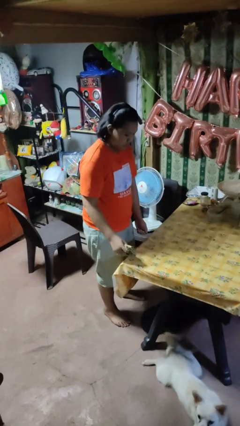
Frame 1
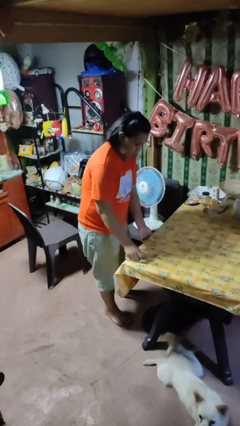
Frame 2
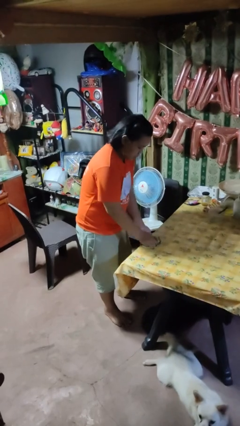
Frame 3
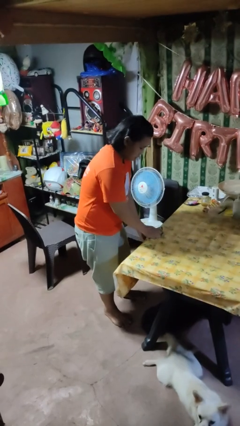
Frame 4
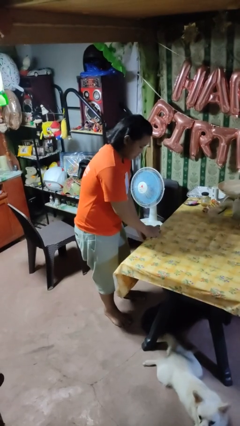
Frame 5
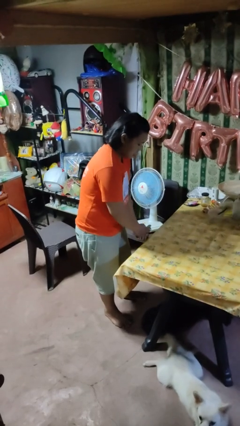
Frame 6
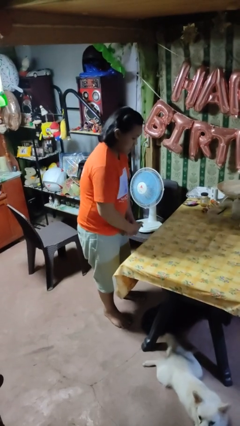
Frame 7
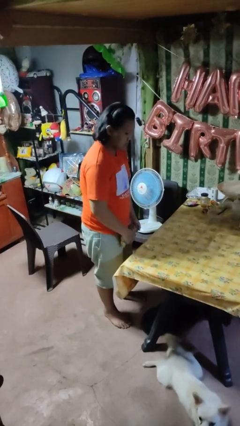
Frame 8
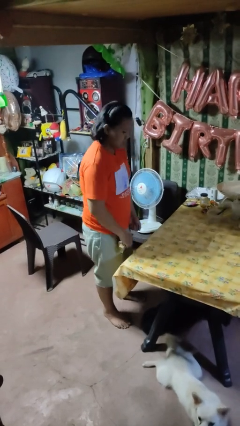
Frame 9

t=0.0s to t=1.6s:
person cleans table with rag

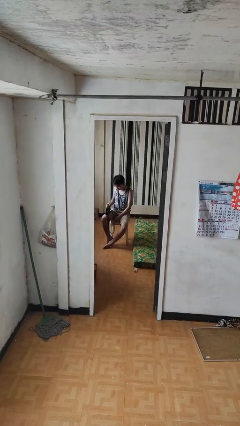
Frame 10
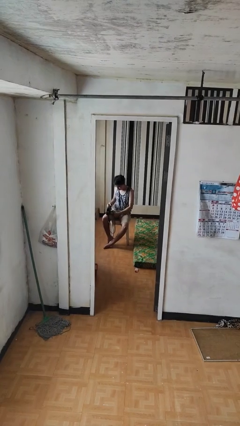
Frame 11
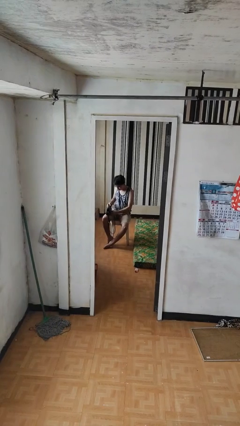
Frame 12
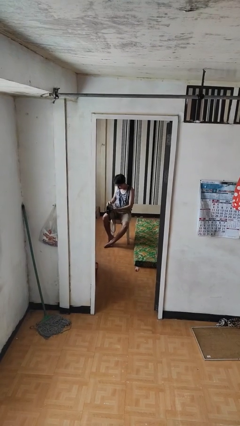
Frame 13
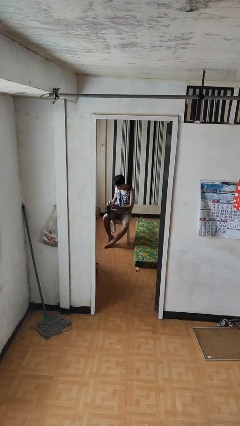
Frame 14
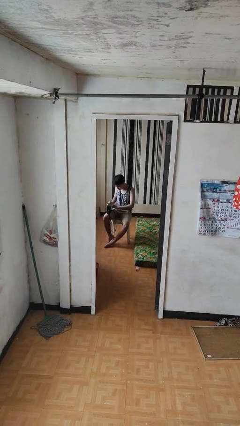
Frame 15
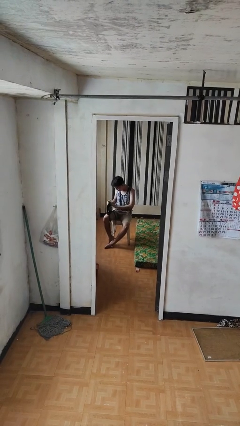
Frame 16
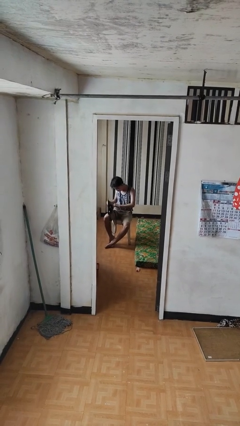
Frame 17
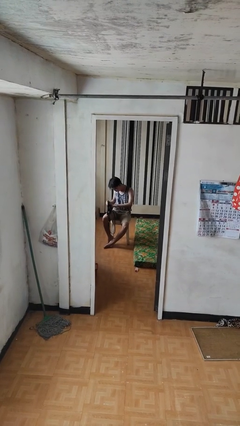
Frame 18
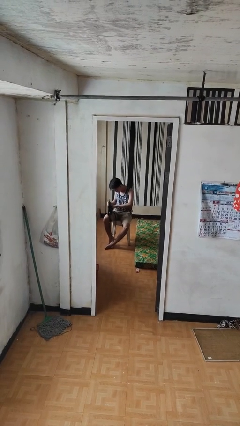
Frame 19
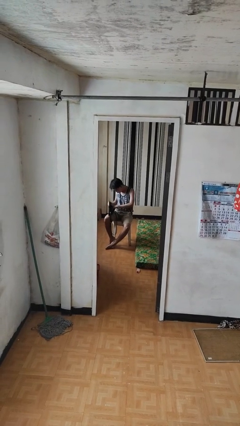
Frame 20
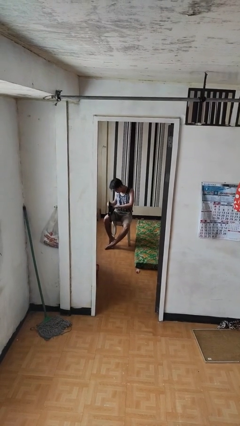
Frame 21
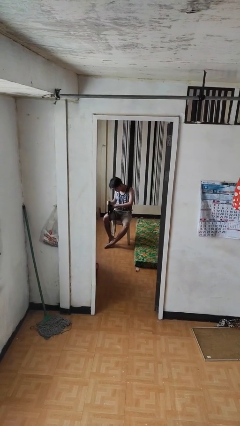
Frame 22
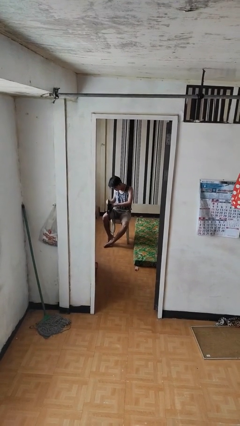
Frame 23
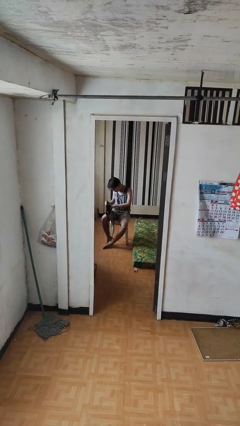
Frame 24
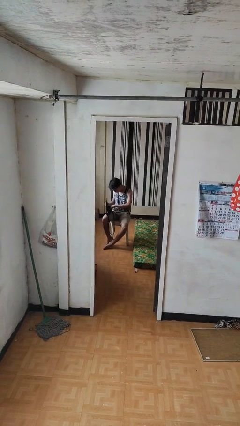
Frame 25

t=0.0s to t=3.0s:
person searches in purse

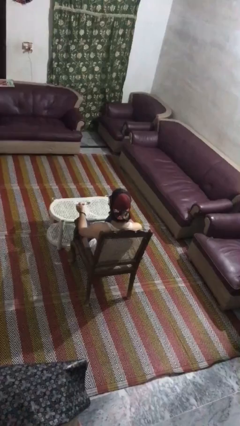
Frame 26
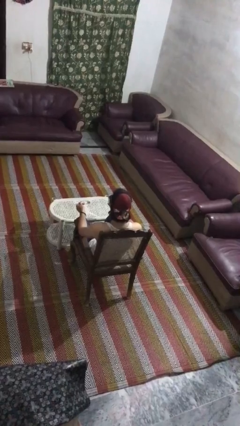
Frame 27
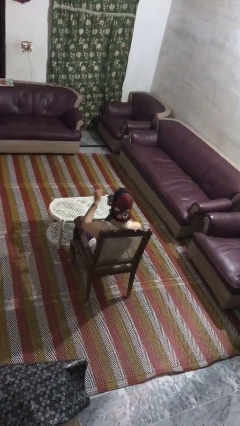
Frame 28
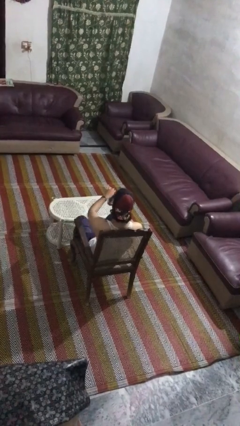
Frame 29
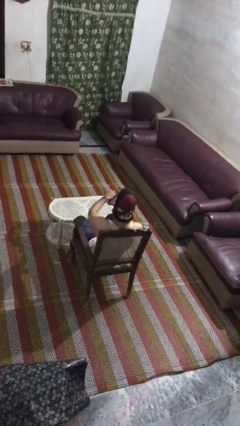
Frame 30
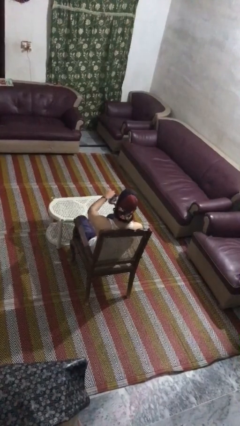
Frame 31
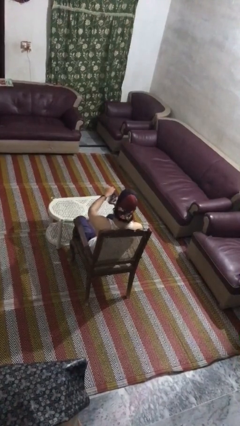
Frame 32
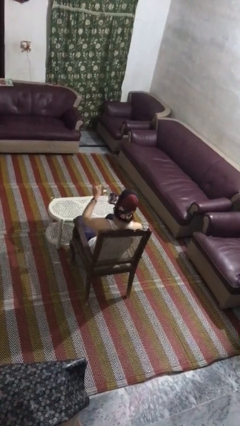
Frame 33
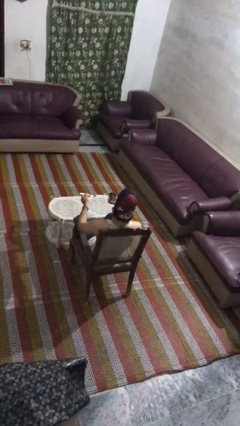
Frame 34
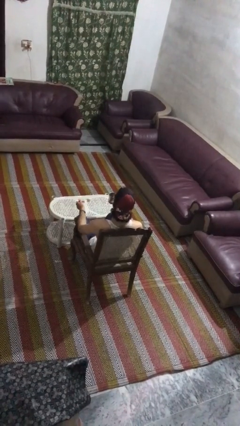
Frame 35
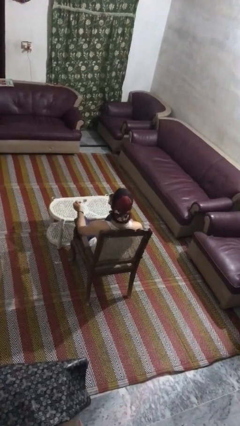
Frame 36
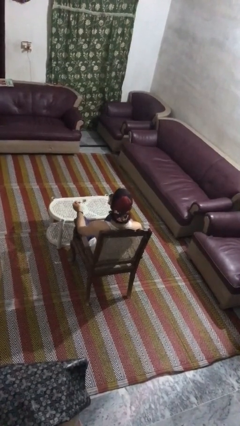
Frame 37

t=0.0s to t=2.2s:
person stirs mug

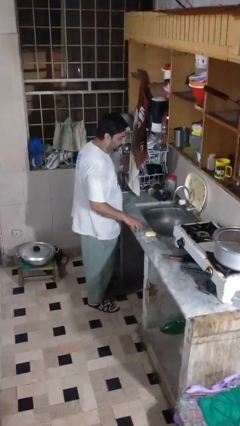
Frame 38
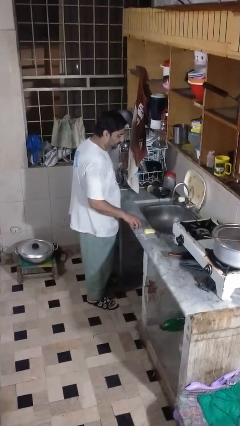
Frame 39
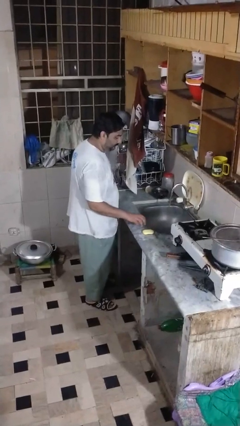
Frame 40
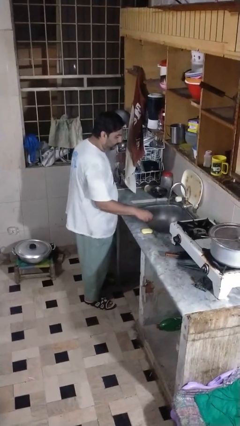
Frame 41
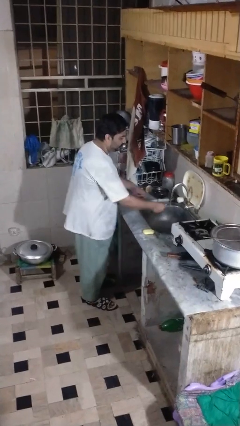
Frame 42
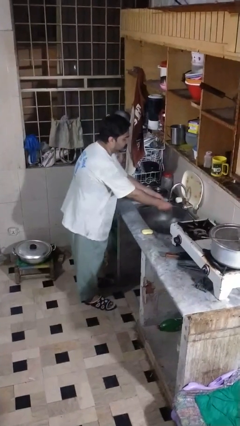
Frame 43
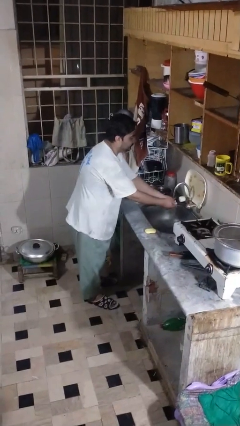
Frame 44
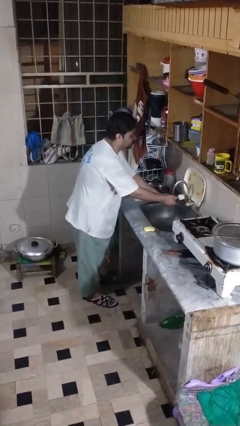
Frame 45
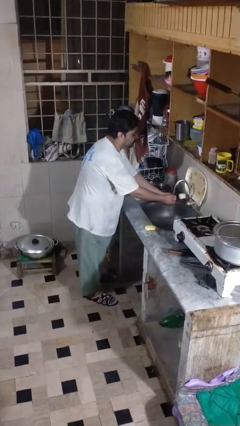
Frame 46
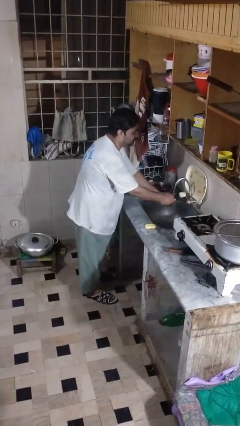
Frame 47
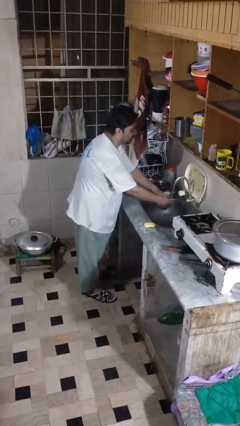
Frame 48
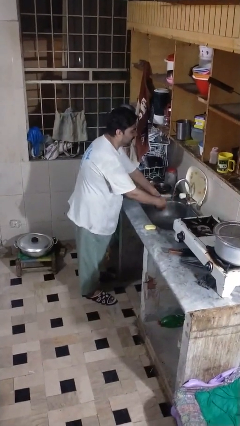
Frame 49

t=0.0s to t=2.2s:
person washes hands

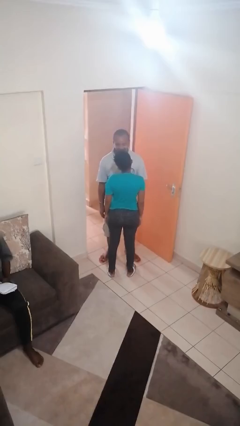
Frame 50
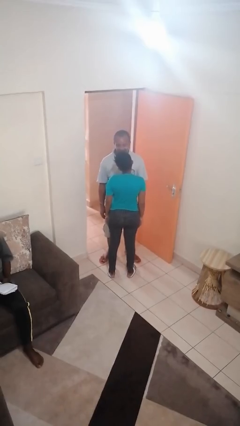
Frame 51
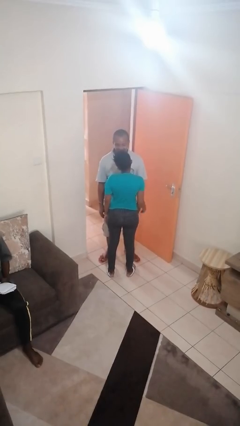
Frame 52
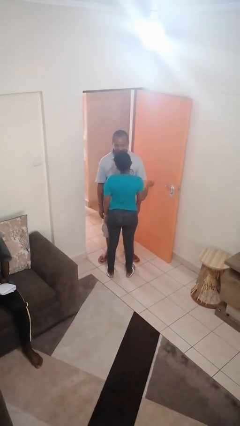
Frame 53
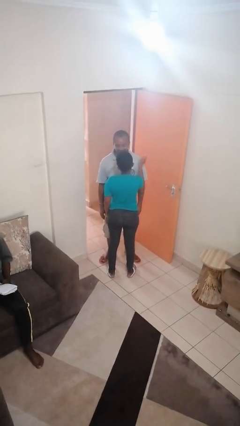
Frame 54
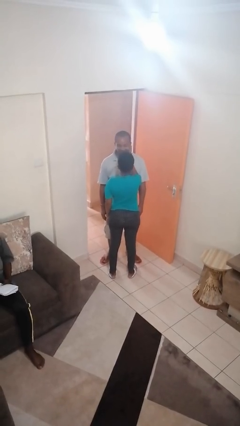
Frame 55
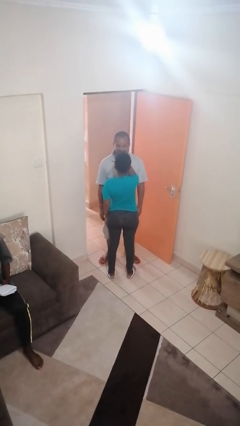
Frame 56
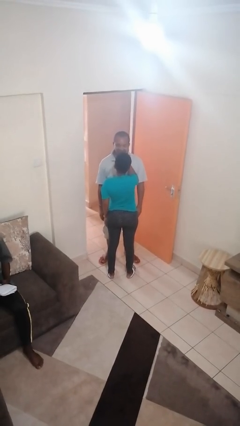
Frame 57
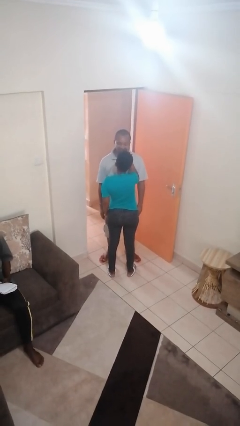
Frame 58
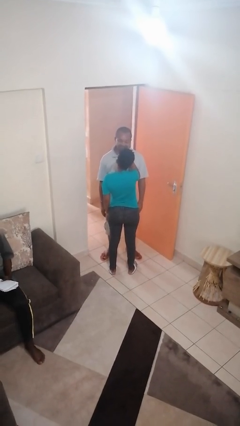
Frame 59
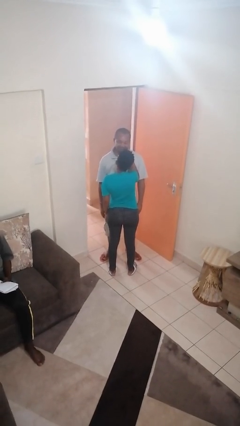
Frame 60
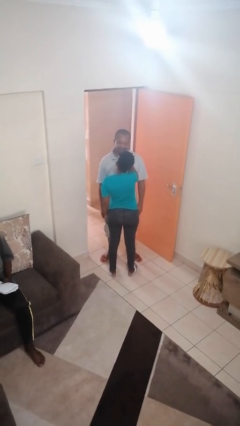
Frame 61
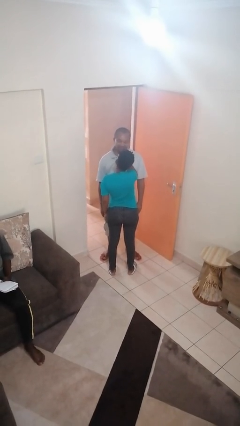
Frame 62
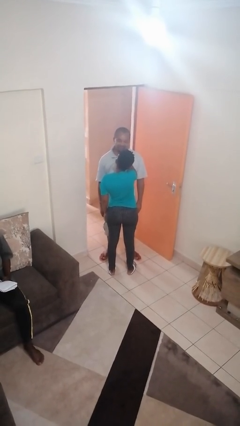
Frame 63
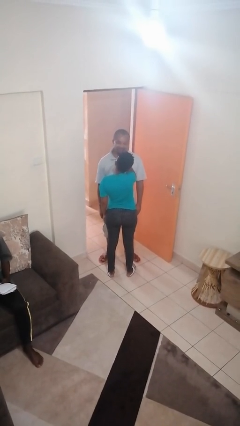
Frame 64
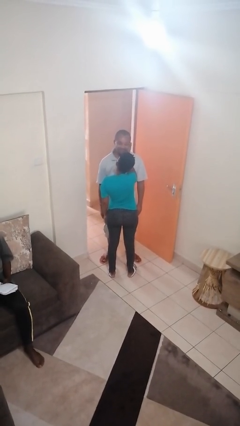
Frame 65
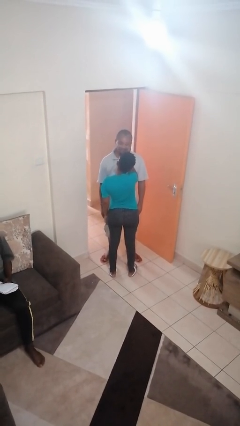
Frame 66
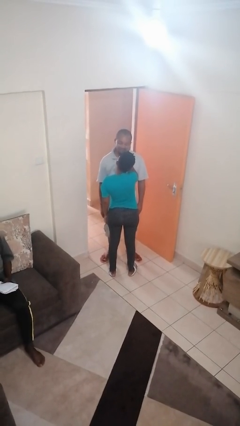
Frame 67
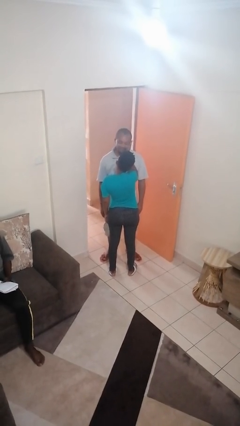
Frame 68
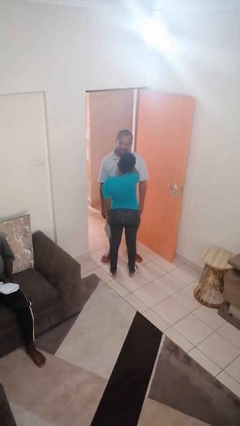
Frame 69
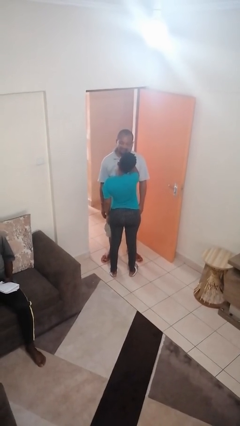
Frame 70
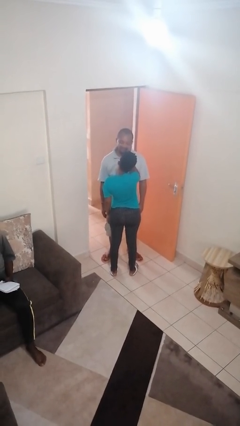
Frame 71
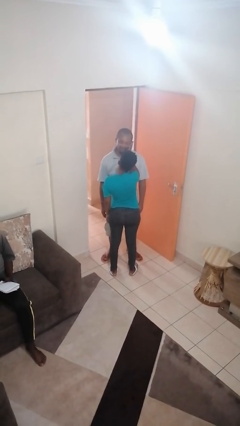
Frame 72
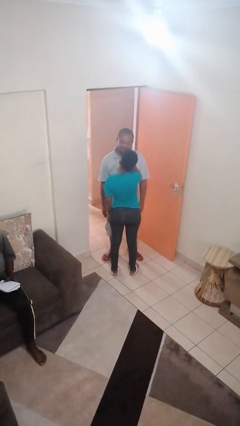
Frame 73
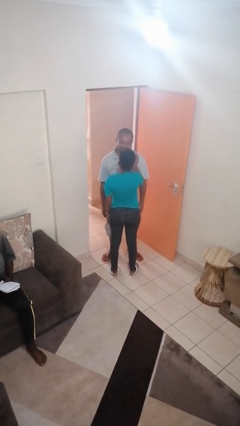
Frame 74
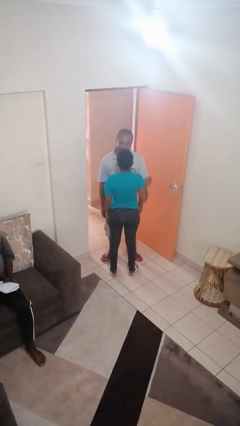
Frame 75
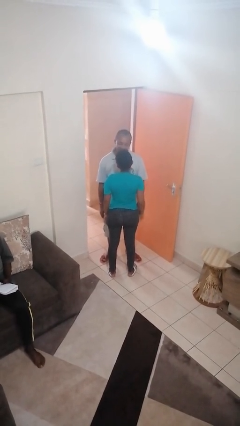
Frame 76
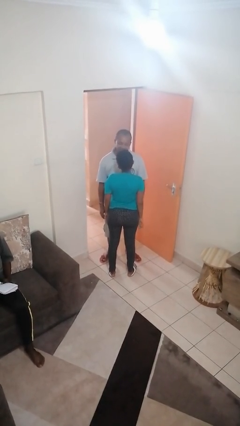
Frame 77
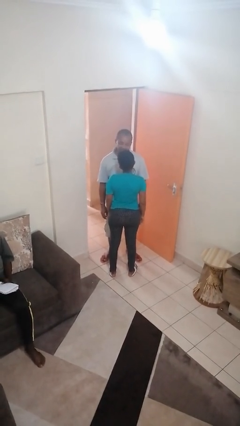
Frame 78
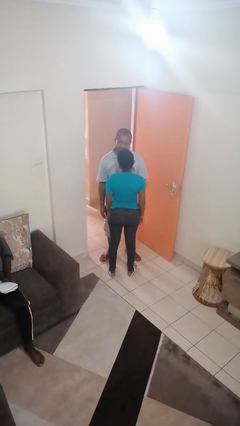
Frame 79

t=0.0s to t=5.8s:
person touches face of person

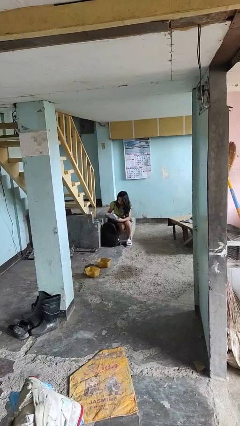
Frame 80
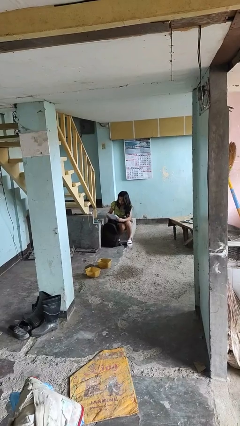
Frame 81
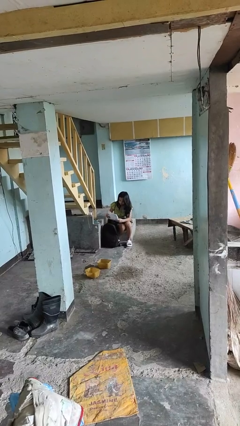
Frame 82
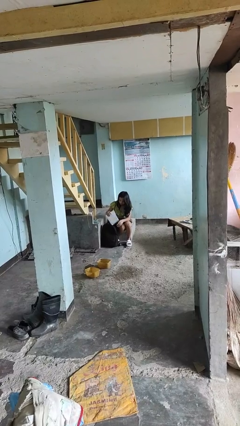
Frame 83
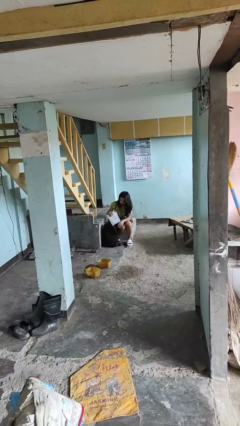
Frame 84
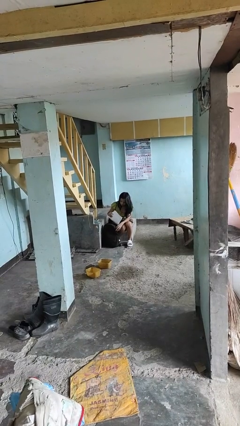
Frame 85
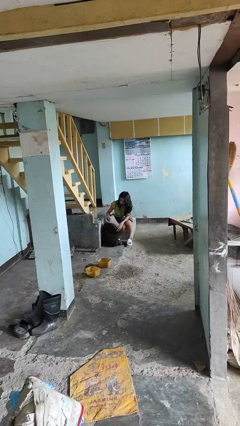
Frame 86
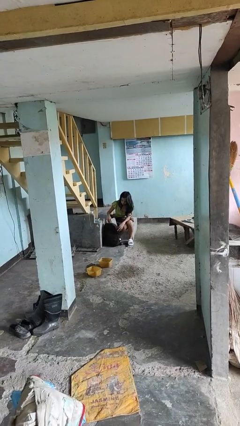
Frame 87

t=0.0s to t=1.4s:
person takes object from backpack

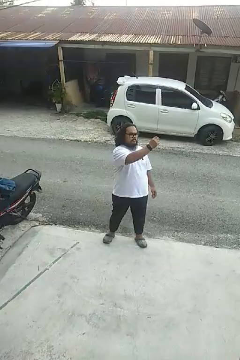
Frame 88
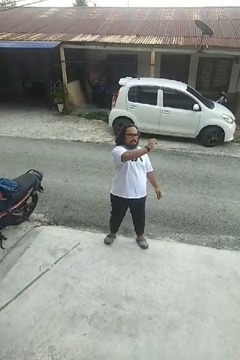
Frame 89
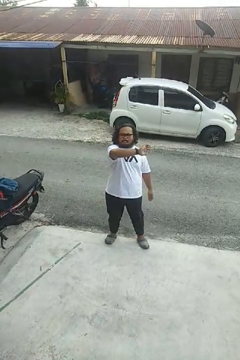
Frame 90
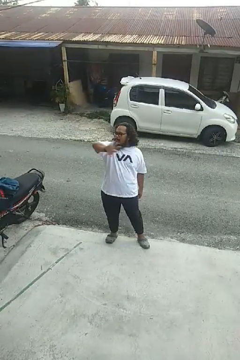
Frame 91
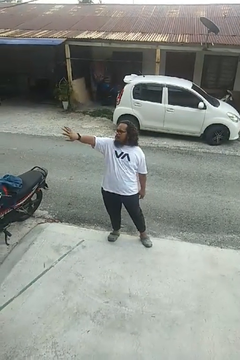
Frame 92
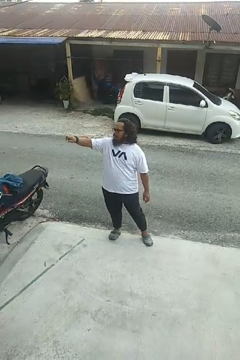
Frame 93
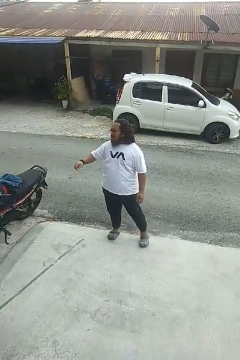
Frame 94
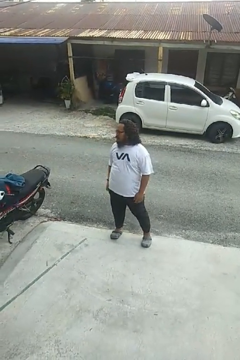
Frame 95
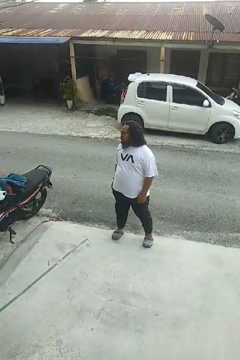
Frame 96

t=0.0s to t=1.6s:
person gestures swipe right
